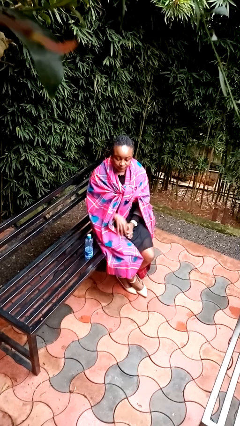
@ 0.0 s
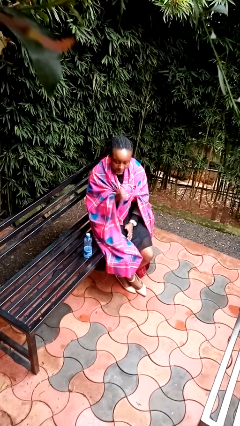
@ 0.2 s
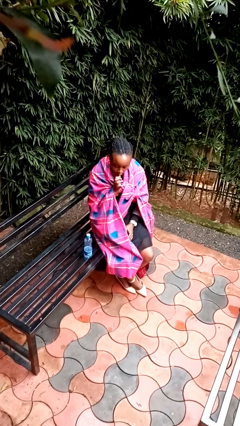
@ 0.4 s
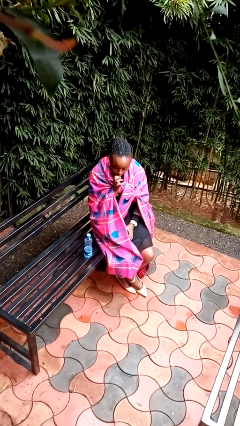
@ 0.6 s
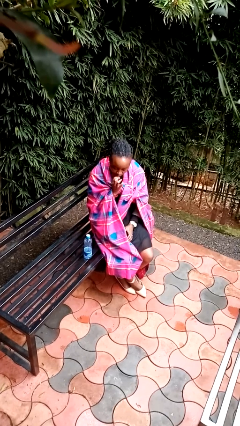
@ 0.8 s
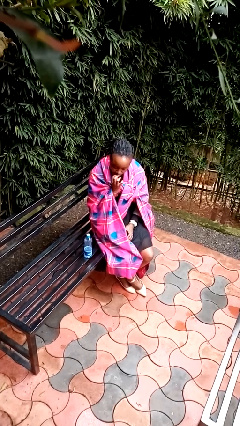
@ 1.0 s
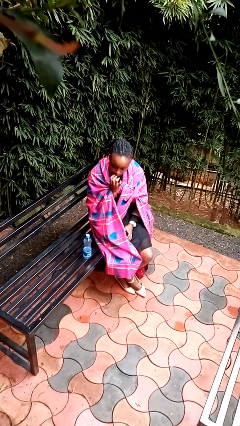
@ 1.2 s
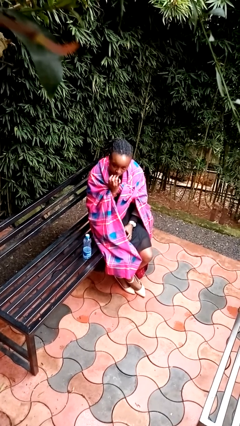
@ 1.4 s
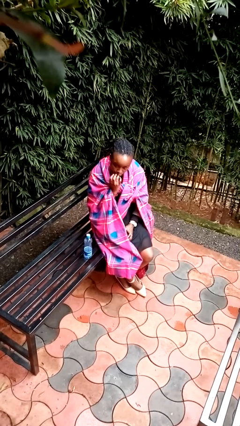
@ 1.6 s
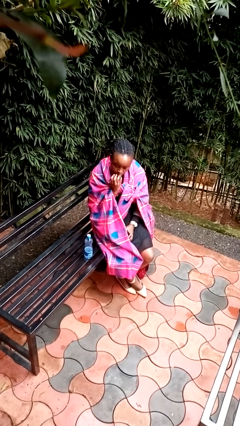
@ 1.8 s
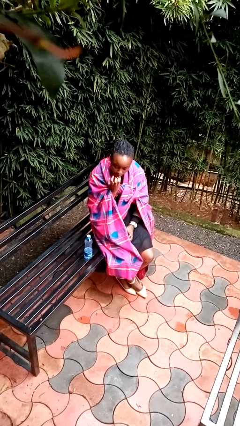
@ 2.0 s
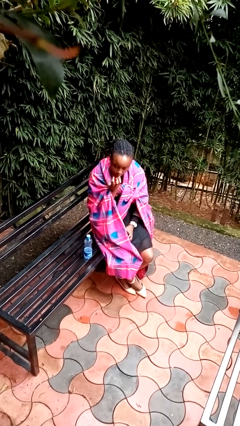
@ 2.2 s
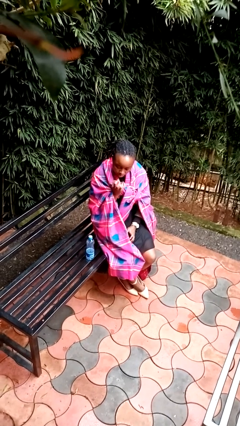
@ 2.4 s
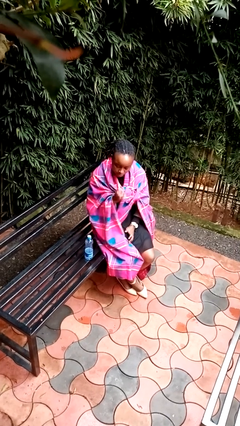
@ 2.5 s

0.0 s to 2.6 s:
person licks fingers

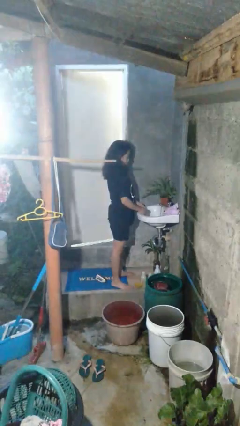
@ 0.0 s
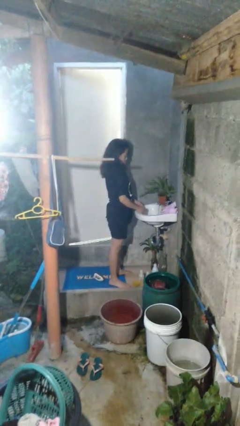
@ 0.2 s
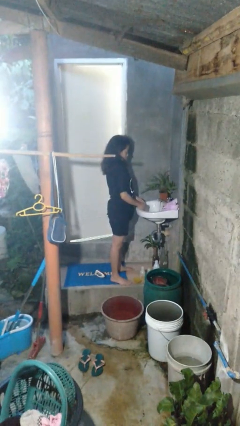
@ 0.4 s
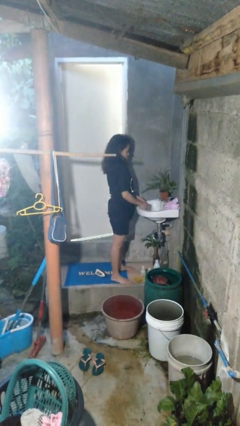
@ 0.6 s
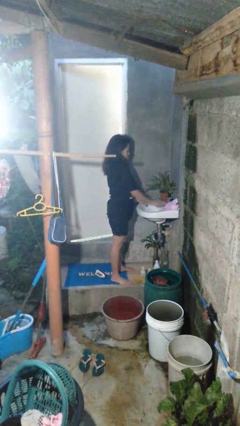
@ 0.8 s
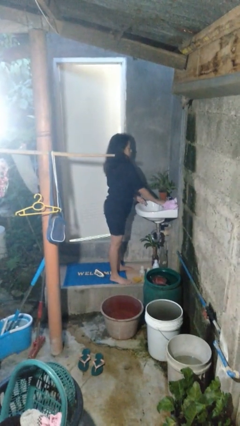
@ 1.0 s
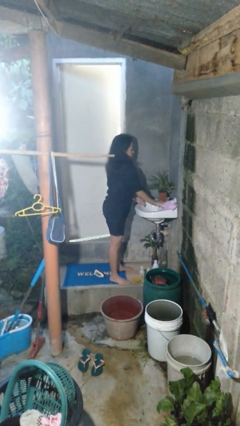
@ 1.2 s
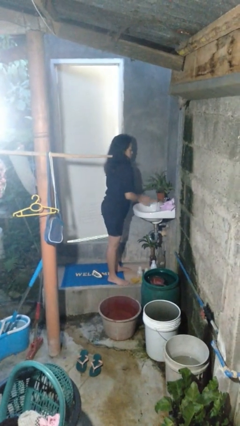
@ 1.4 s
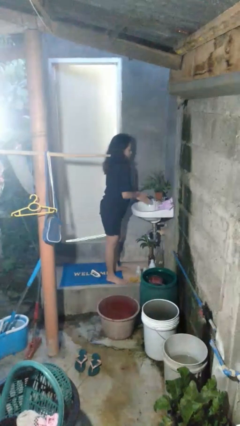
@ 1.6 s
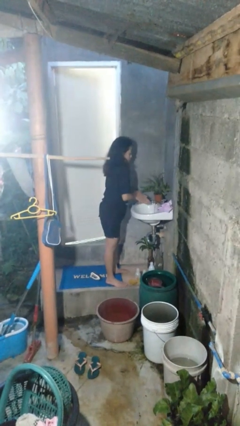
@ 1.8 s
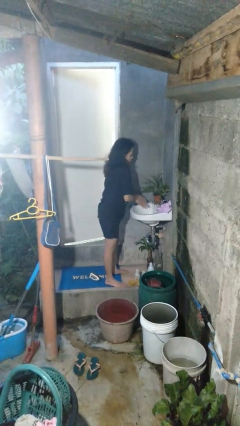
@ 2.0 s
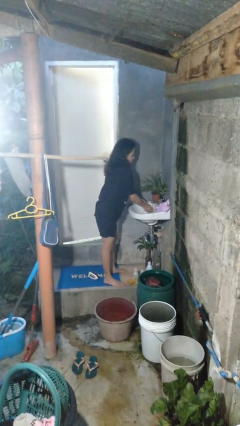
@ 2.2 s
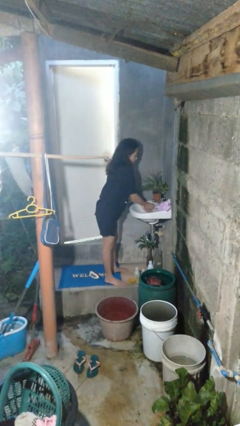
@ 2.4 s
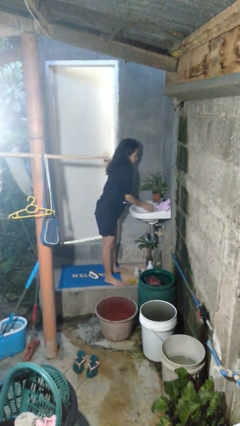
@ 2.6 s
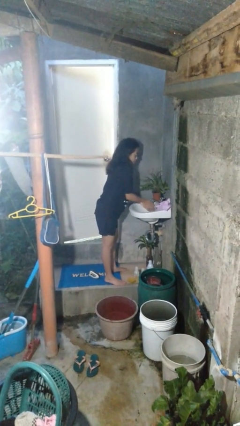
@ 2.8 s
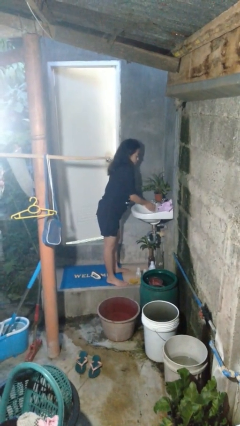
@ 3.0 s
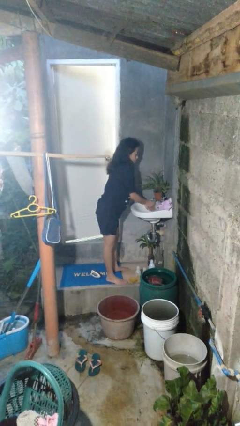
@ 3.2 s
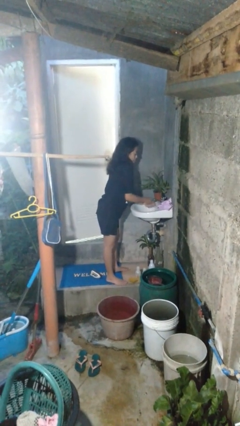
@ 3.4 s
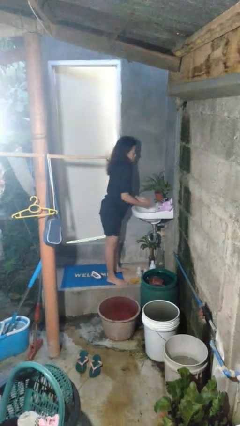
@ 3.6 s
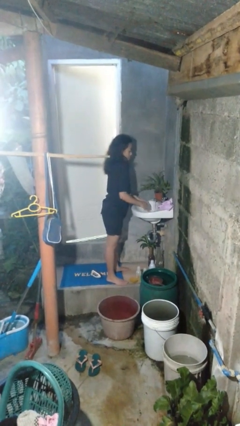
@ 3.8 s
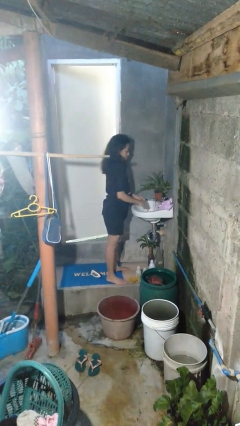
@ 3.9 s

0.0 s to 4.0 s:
person washes hands

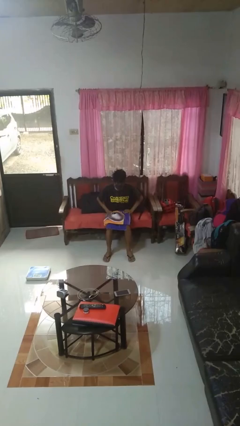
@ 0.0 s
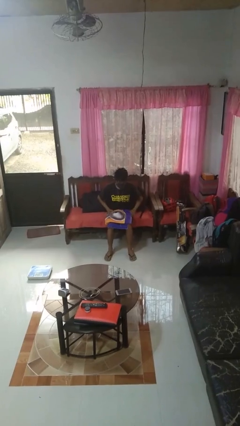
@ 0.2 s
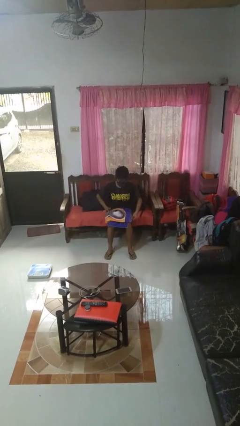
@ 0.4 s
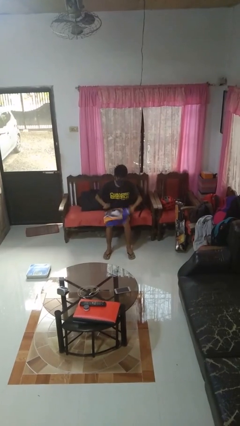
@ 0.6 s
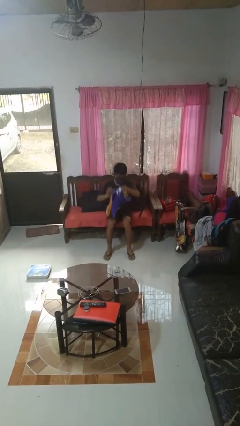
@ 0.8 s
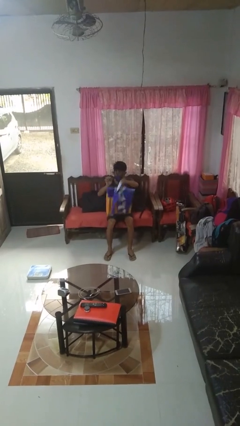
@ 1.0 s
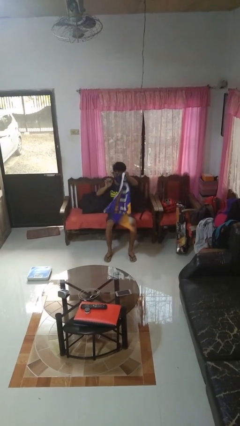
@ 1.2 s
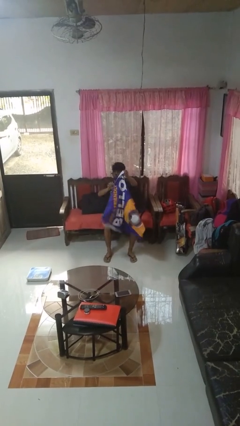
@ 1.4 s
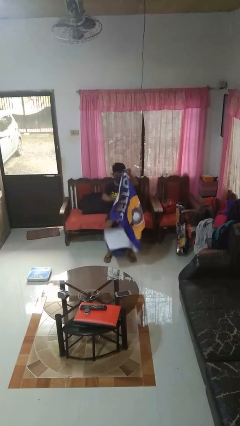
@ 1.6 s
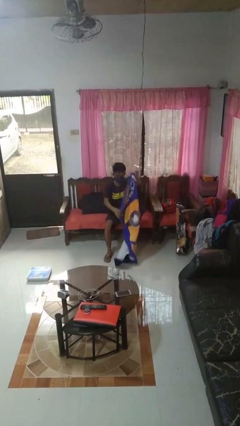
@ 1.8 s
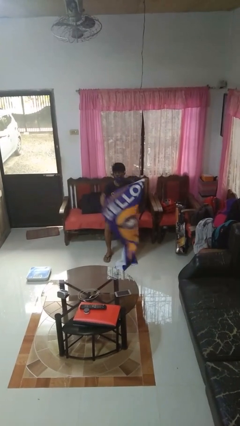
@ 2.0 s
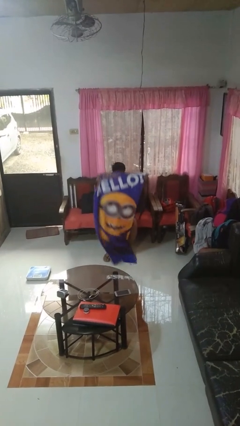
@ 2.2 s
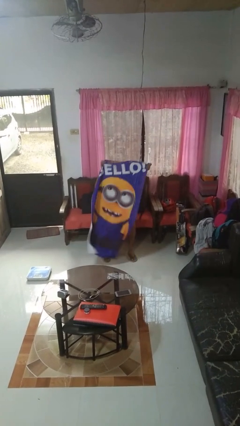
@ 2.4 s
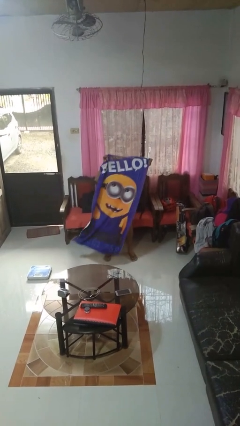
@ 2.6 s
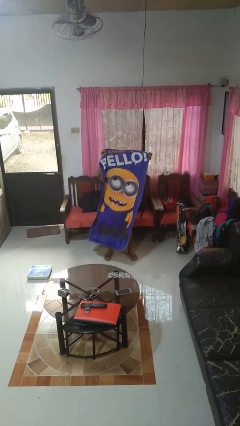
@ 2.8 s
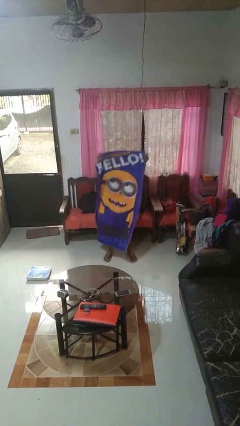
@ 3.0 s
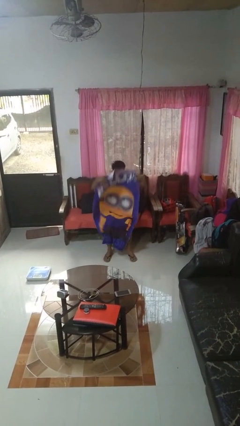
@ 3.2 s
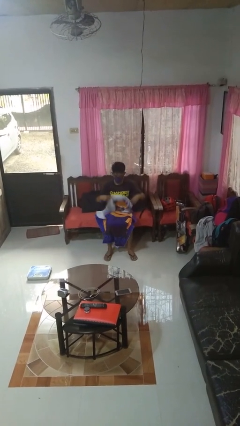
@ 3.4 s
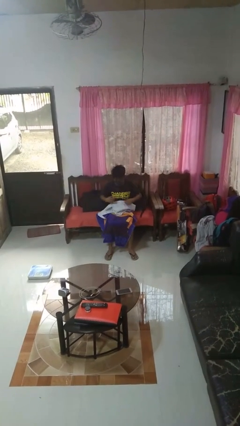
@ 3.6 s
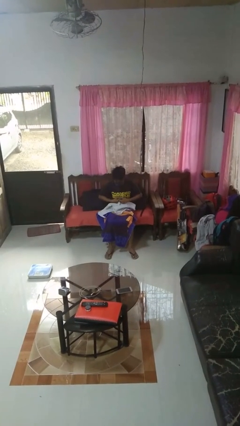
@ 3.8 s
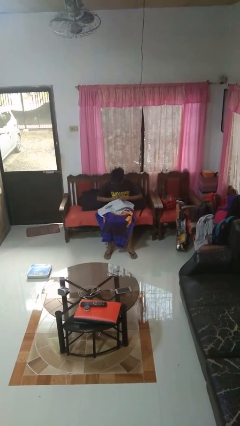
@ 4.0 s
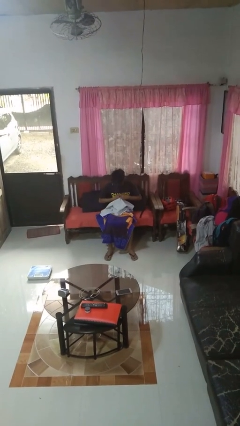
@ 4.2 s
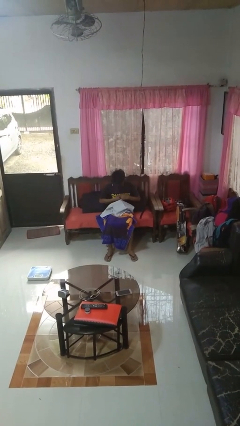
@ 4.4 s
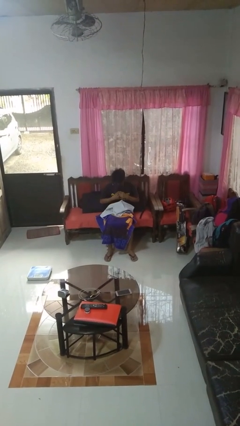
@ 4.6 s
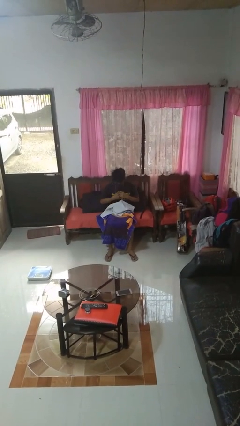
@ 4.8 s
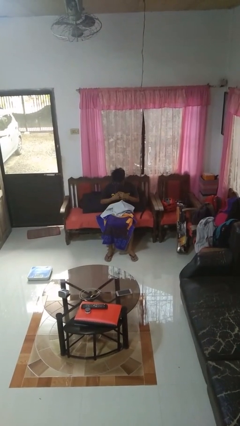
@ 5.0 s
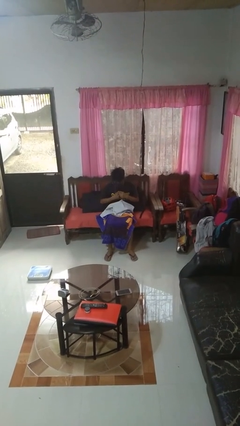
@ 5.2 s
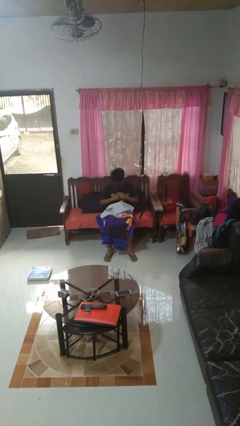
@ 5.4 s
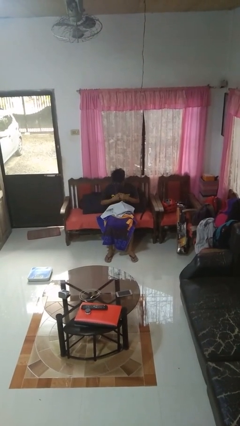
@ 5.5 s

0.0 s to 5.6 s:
person folds towel

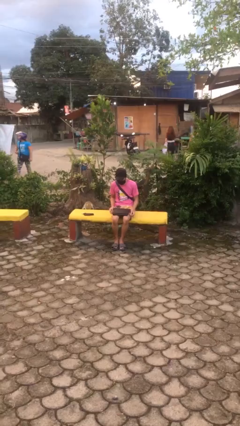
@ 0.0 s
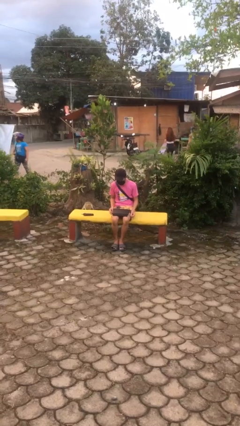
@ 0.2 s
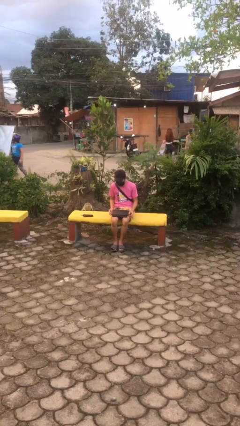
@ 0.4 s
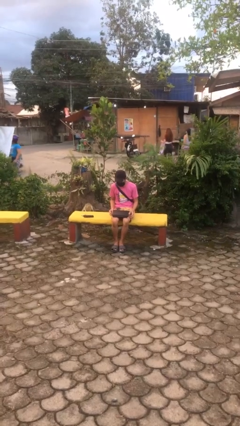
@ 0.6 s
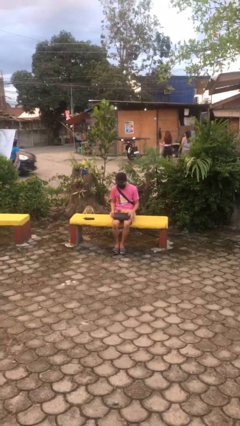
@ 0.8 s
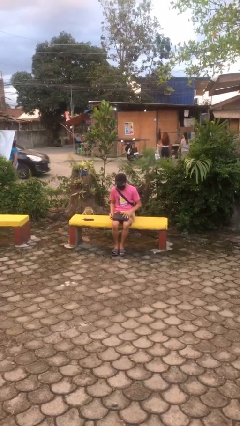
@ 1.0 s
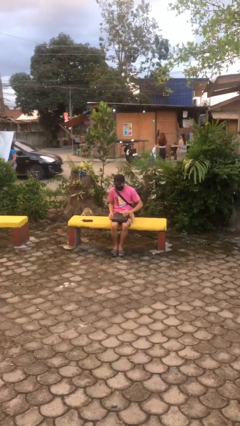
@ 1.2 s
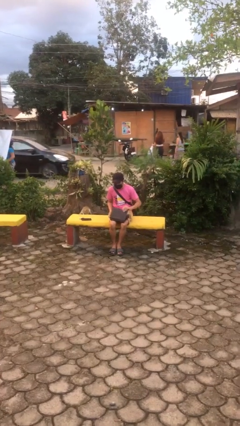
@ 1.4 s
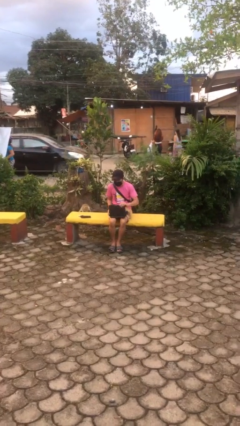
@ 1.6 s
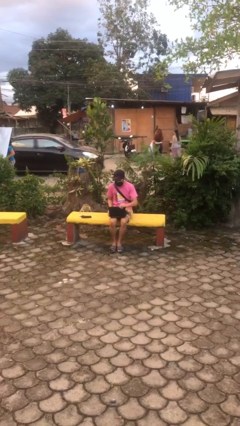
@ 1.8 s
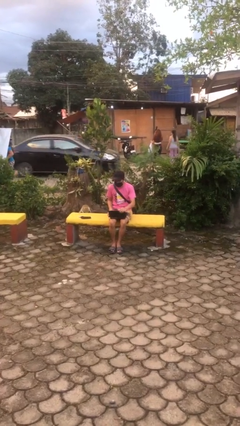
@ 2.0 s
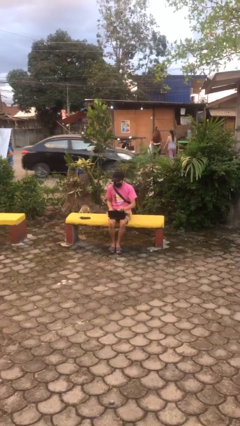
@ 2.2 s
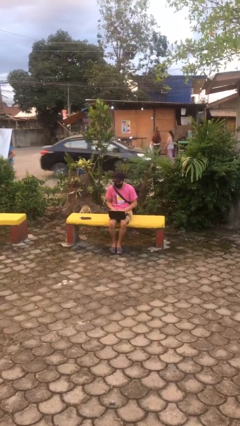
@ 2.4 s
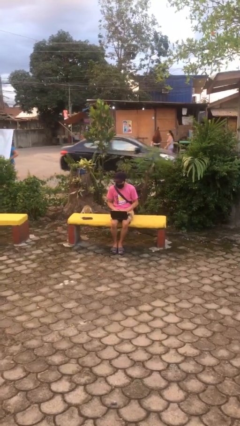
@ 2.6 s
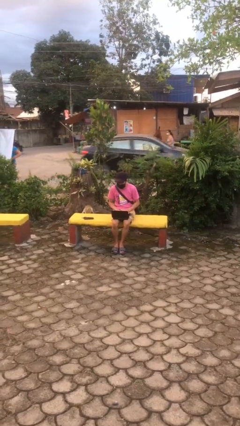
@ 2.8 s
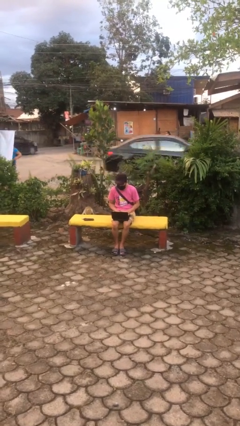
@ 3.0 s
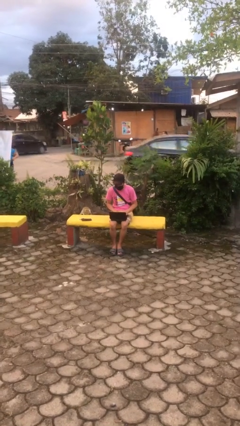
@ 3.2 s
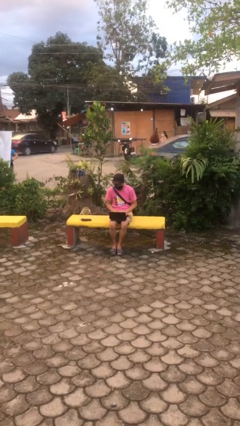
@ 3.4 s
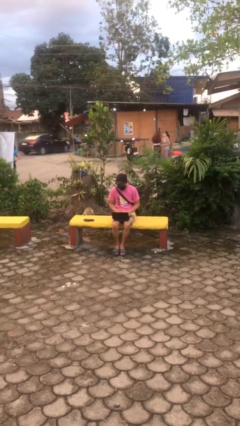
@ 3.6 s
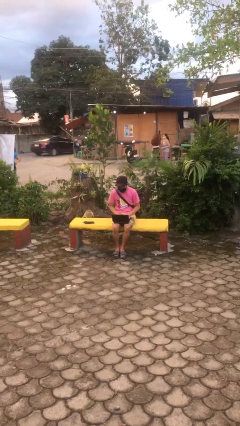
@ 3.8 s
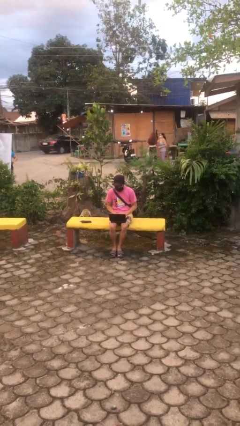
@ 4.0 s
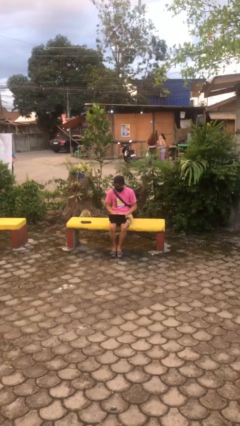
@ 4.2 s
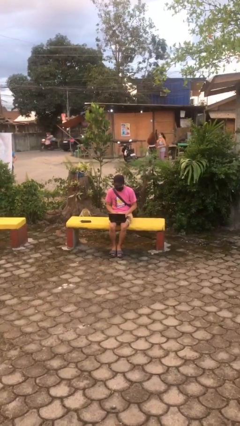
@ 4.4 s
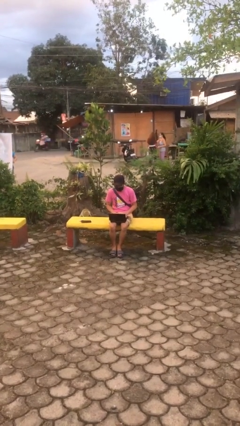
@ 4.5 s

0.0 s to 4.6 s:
person interacts with laptop

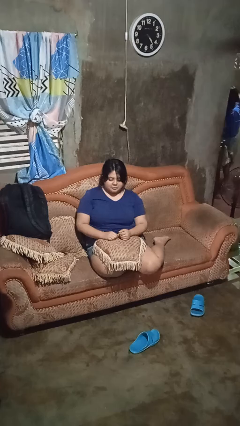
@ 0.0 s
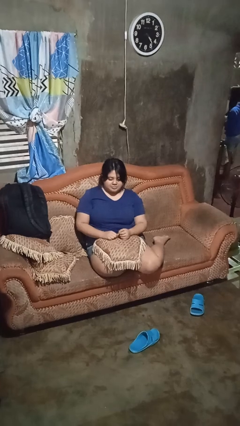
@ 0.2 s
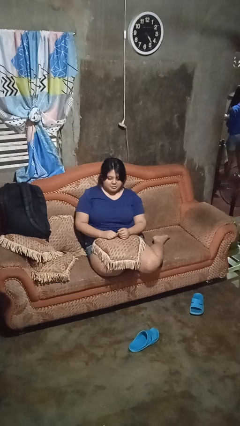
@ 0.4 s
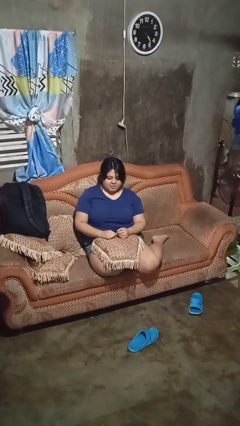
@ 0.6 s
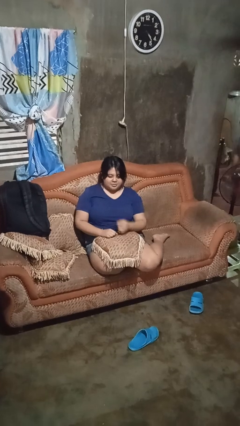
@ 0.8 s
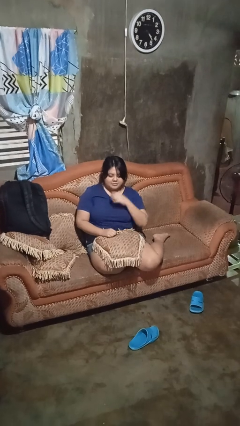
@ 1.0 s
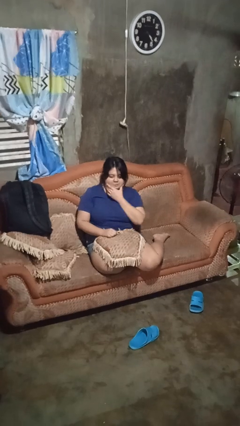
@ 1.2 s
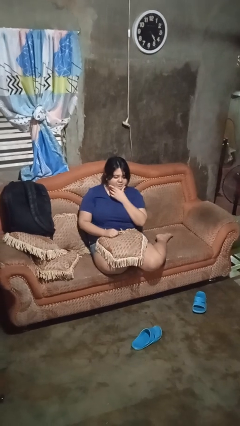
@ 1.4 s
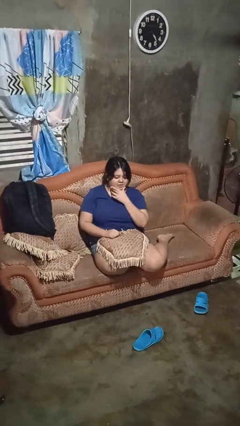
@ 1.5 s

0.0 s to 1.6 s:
person strokes chin
